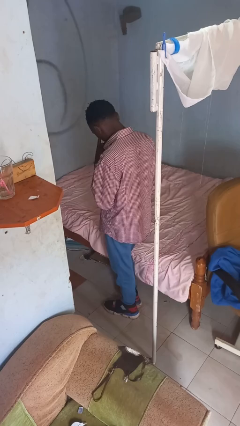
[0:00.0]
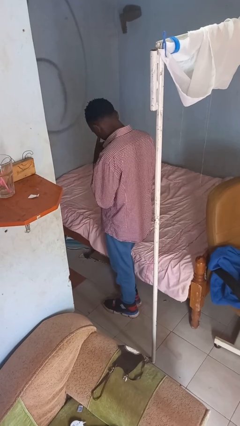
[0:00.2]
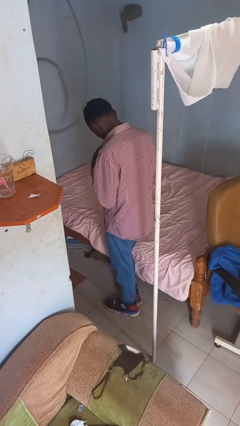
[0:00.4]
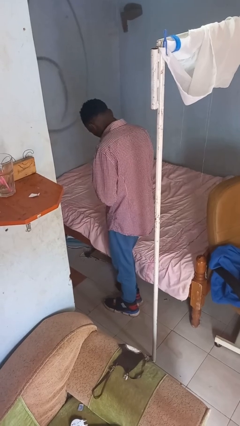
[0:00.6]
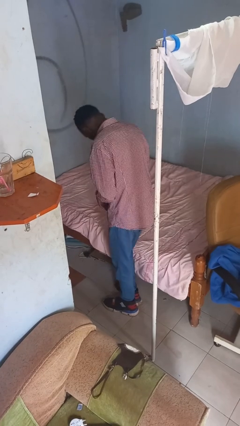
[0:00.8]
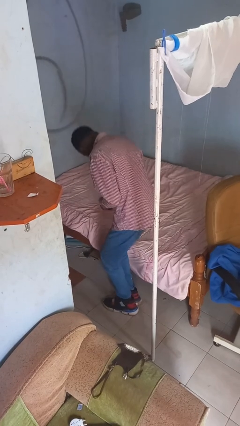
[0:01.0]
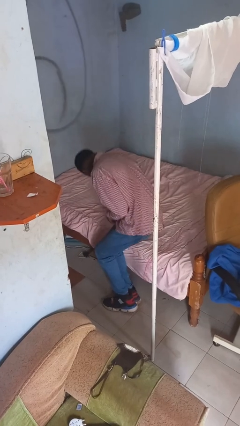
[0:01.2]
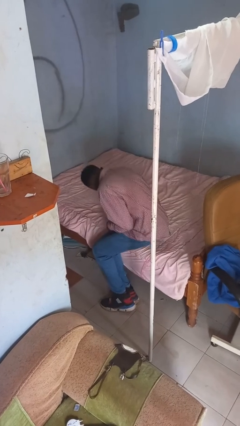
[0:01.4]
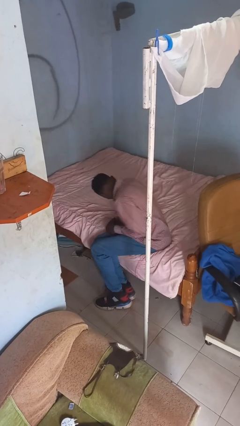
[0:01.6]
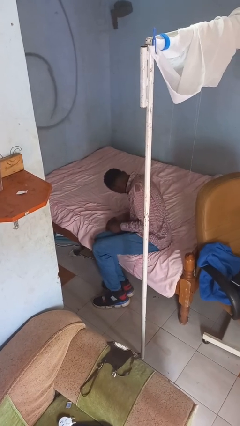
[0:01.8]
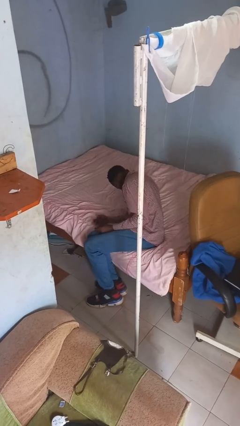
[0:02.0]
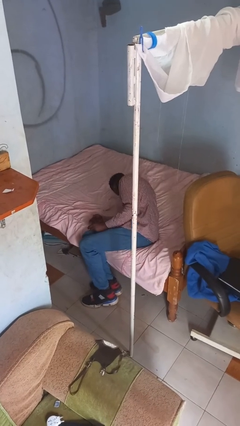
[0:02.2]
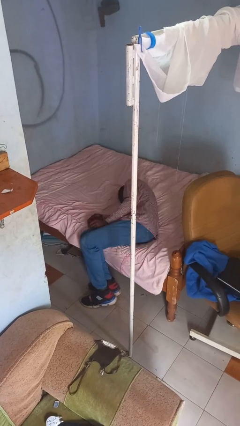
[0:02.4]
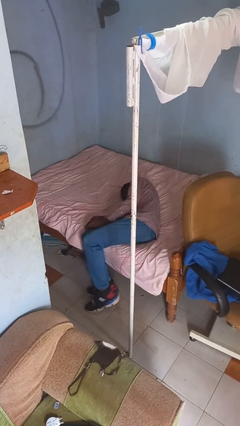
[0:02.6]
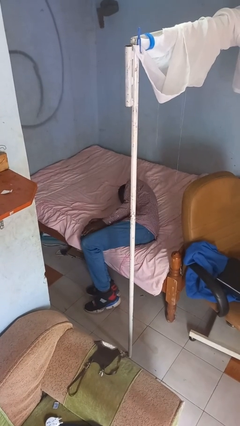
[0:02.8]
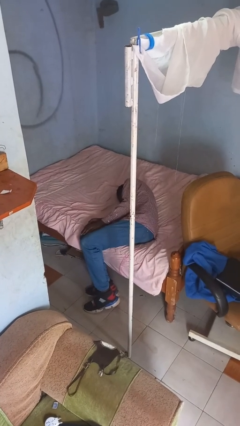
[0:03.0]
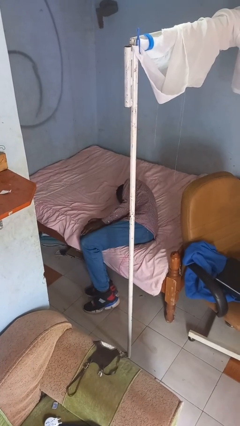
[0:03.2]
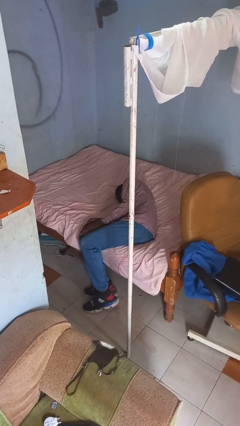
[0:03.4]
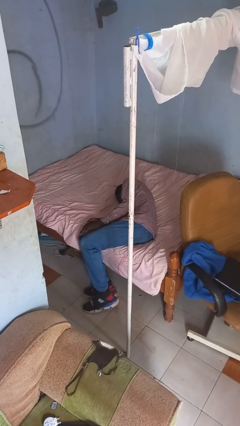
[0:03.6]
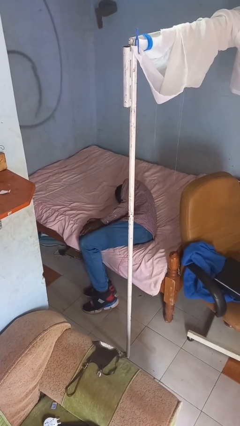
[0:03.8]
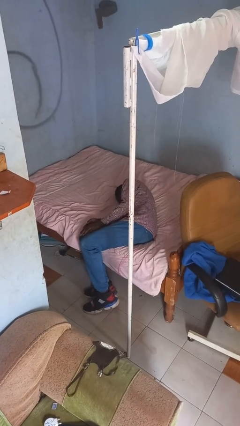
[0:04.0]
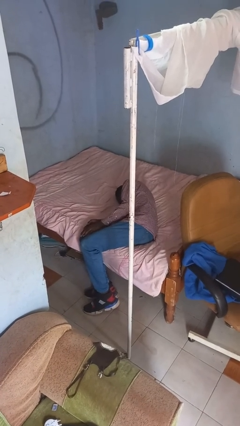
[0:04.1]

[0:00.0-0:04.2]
person lies down on bed

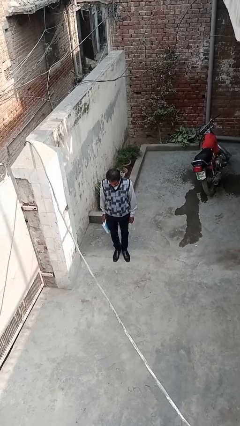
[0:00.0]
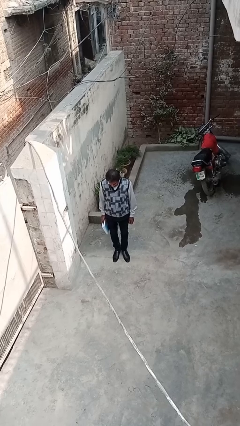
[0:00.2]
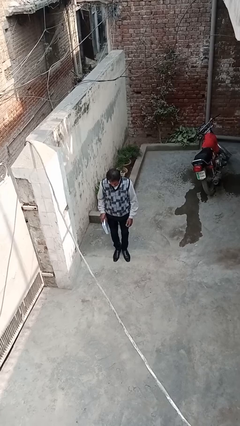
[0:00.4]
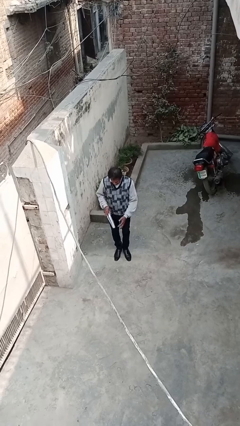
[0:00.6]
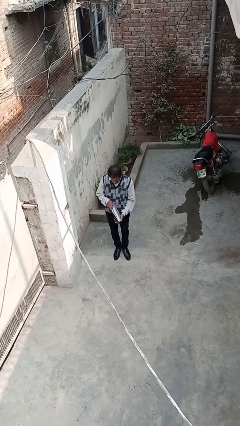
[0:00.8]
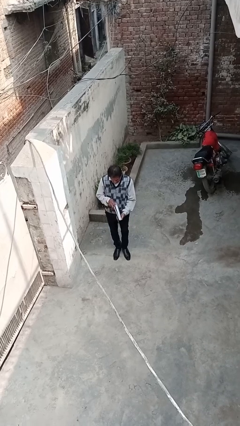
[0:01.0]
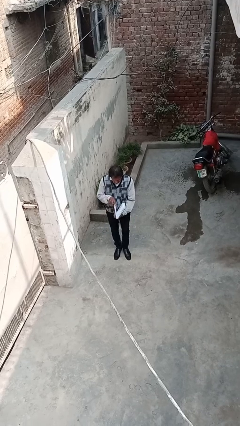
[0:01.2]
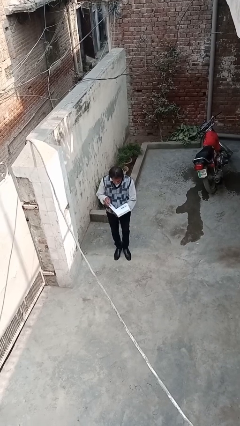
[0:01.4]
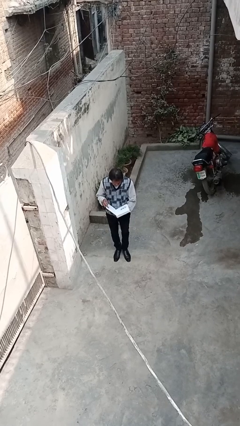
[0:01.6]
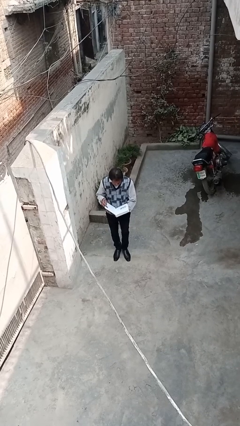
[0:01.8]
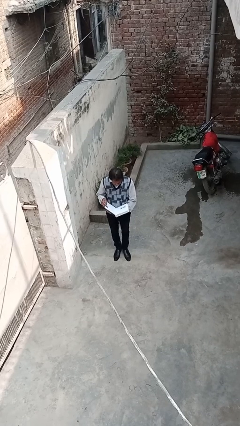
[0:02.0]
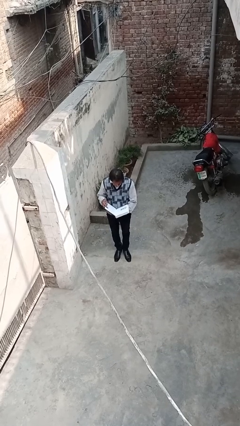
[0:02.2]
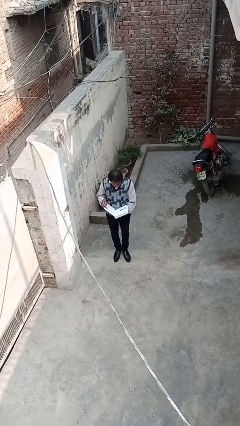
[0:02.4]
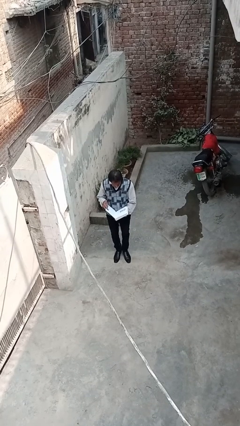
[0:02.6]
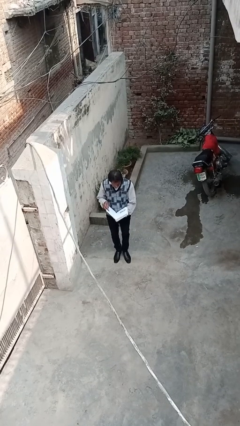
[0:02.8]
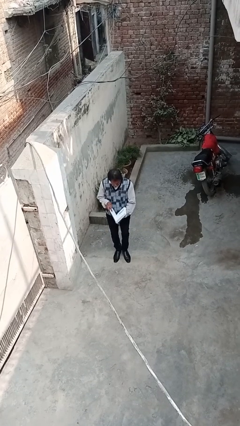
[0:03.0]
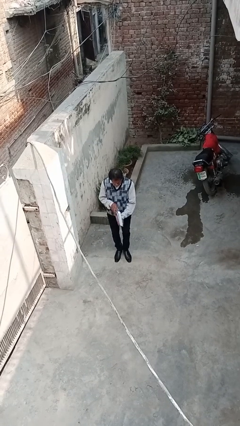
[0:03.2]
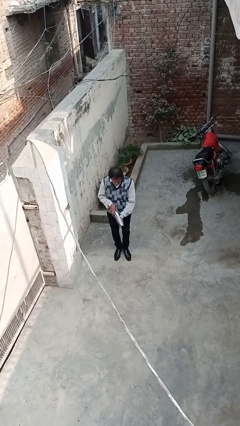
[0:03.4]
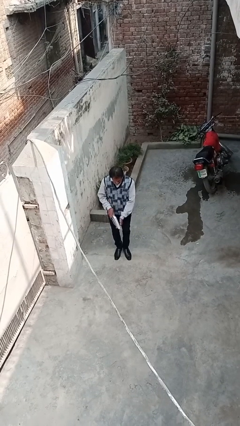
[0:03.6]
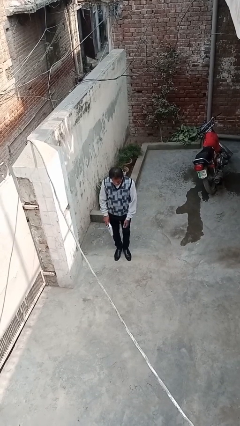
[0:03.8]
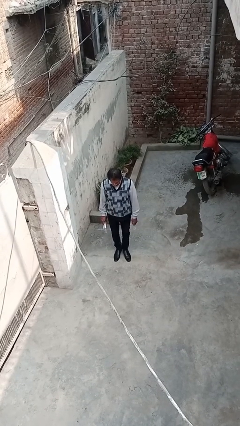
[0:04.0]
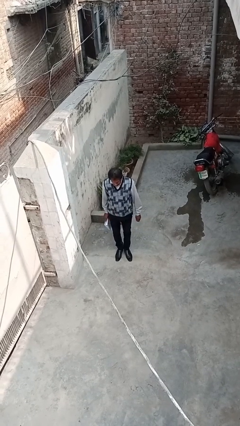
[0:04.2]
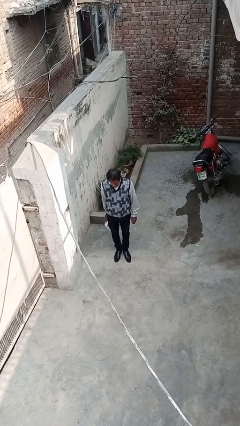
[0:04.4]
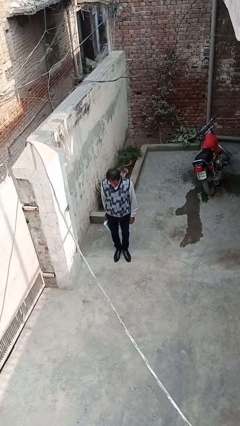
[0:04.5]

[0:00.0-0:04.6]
person reads document

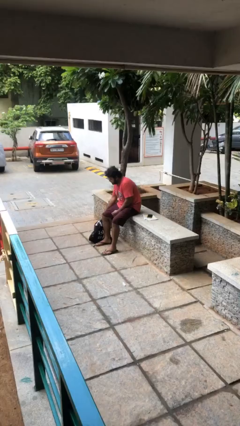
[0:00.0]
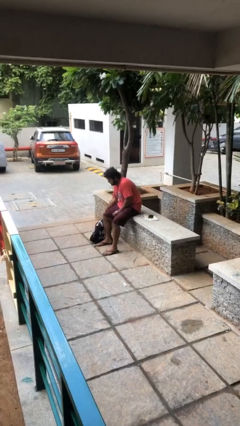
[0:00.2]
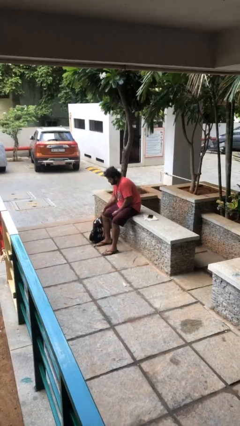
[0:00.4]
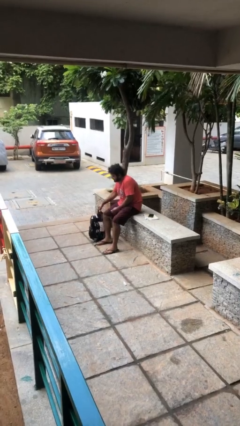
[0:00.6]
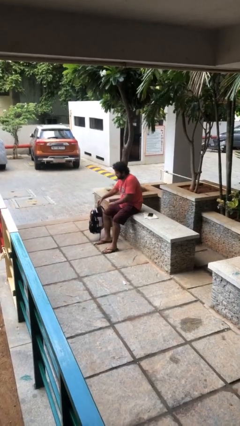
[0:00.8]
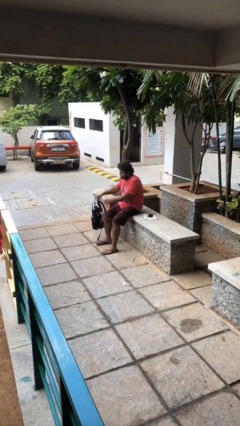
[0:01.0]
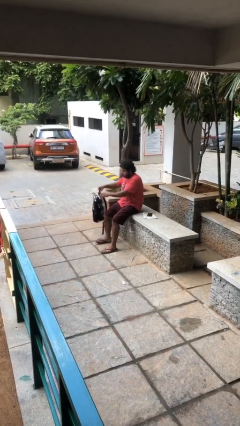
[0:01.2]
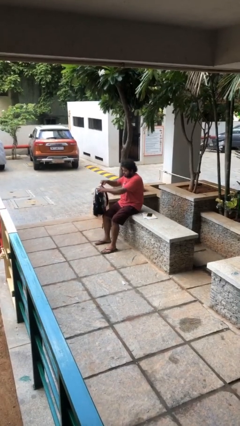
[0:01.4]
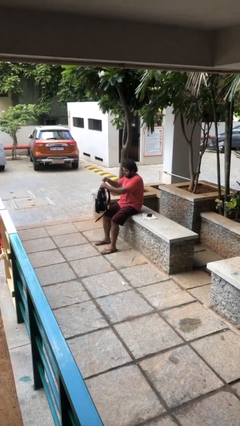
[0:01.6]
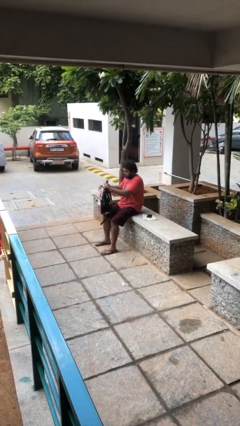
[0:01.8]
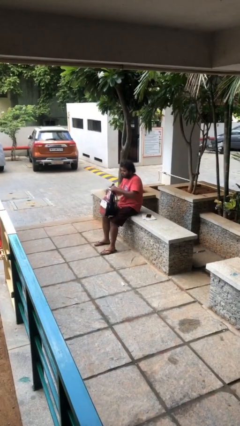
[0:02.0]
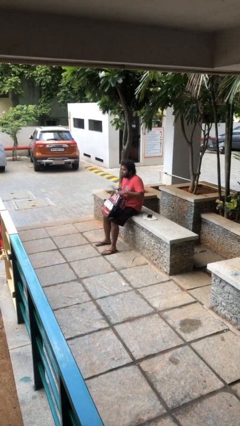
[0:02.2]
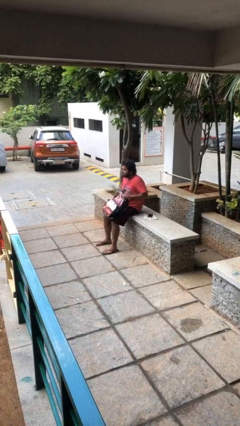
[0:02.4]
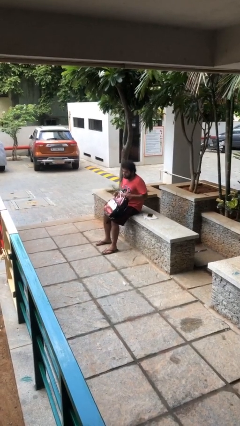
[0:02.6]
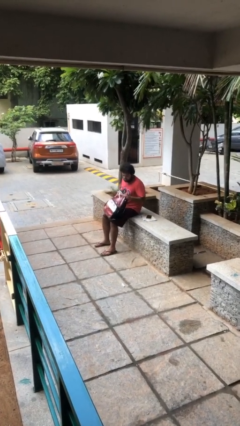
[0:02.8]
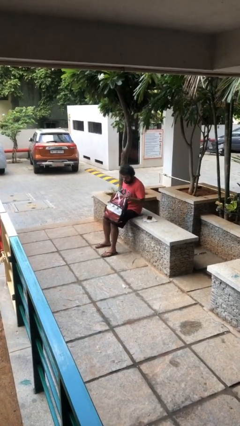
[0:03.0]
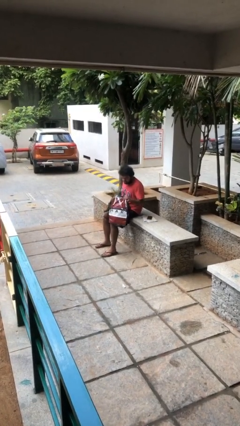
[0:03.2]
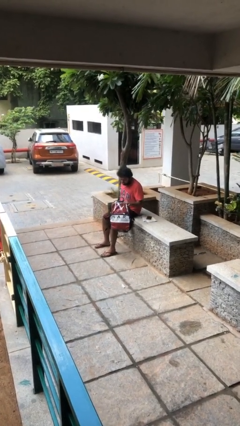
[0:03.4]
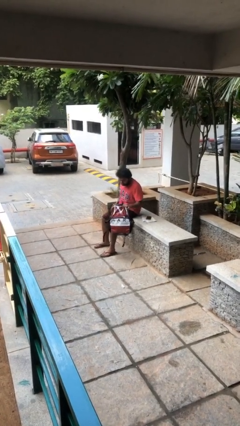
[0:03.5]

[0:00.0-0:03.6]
person picks up object from floor

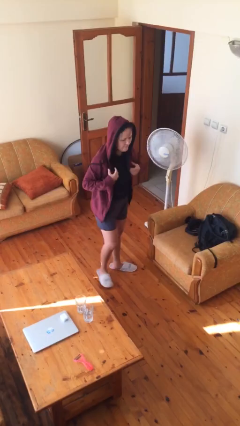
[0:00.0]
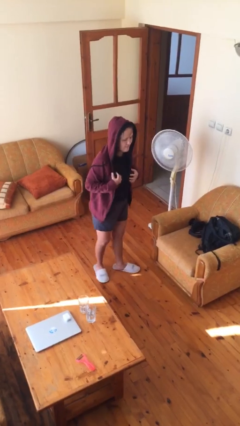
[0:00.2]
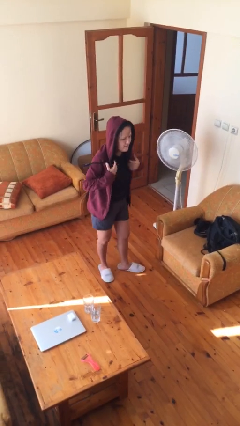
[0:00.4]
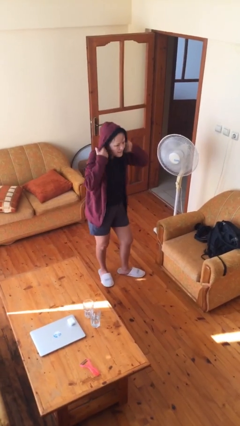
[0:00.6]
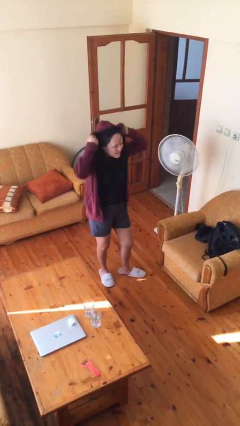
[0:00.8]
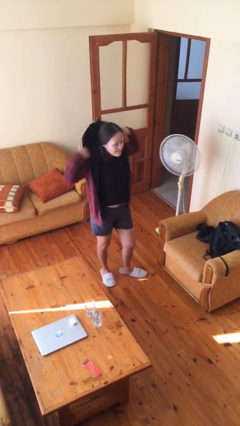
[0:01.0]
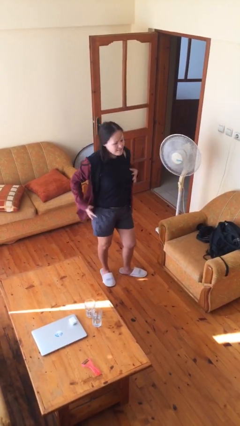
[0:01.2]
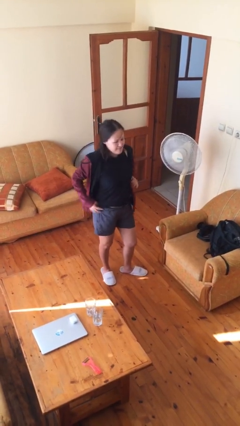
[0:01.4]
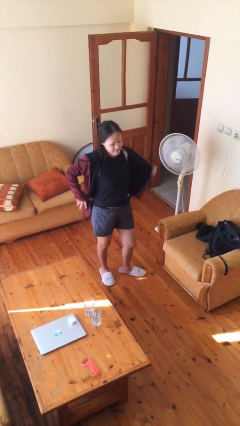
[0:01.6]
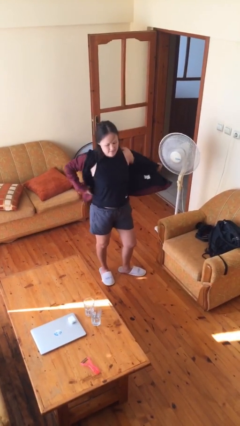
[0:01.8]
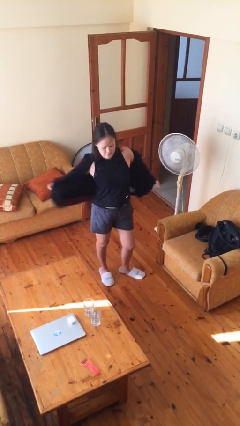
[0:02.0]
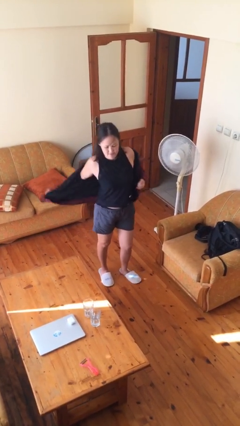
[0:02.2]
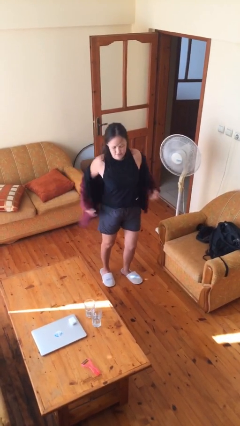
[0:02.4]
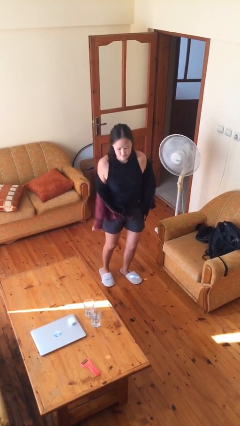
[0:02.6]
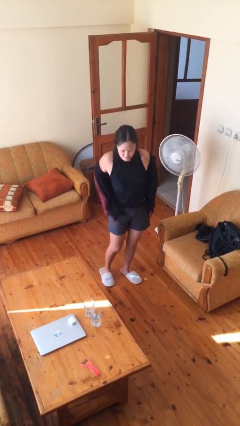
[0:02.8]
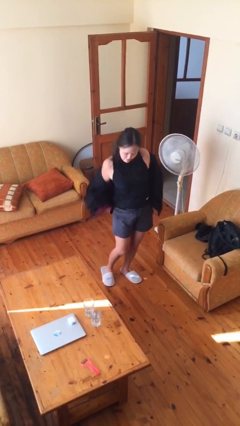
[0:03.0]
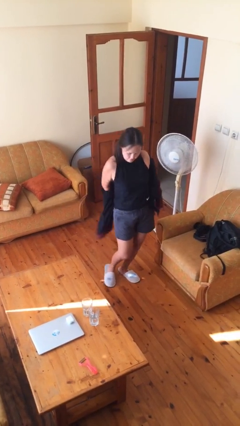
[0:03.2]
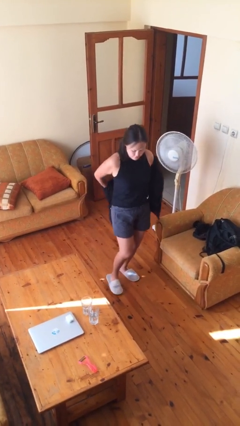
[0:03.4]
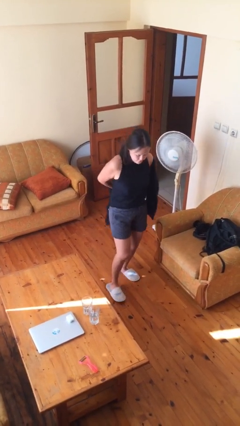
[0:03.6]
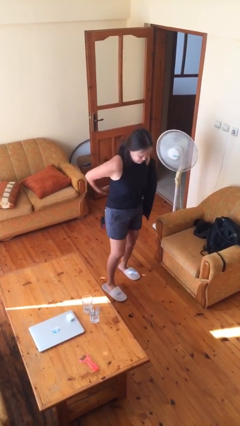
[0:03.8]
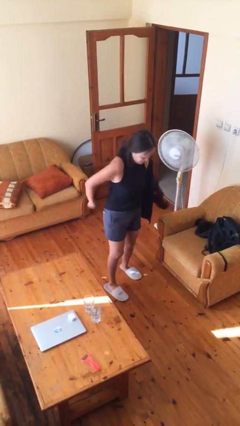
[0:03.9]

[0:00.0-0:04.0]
person takes off hoodie

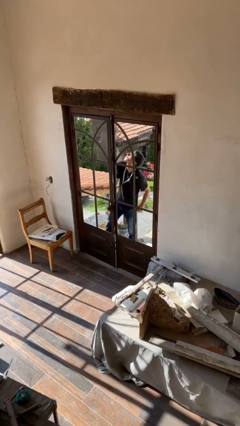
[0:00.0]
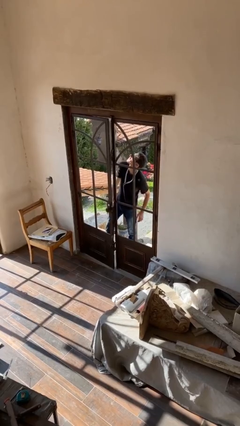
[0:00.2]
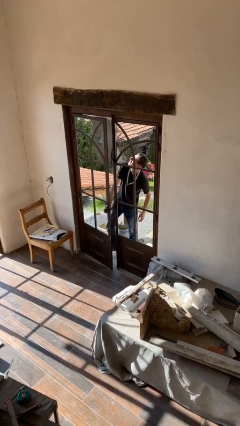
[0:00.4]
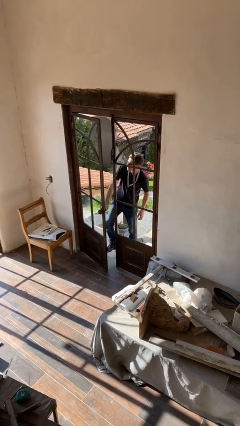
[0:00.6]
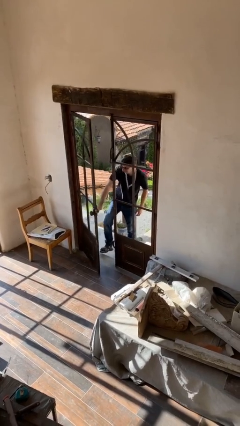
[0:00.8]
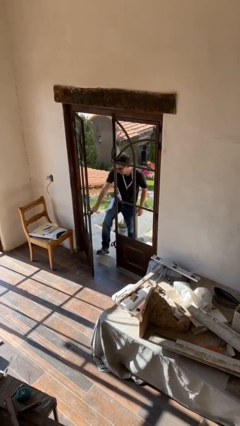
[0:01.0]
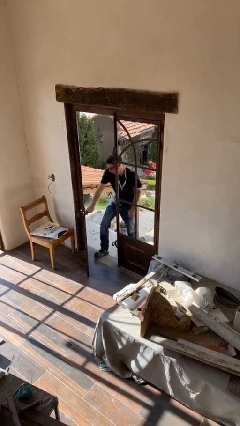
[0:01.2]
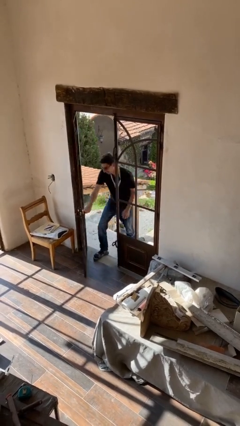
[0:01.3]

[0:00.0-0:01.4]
person opens facility door
